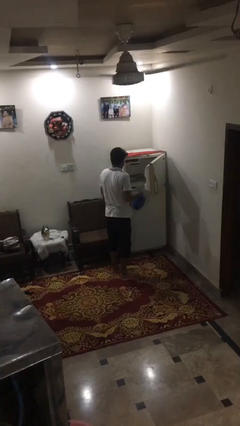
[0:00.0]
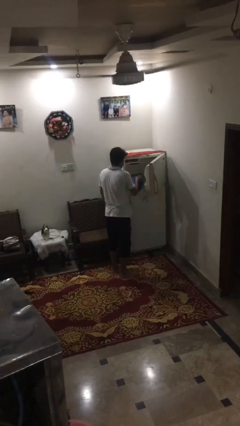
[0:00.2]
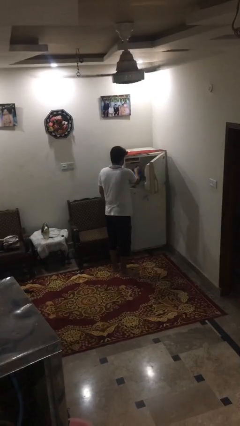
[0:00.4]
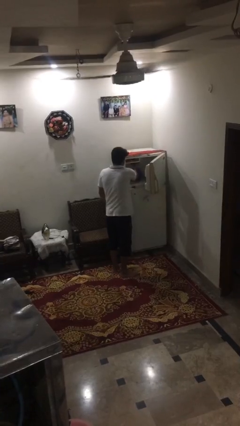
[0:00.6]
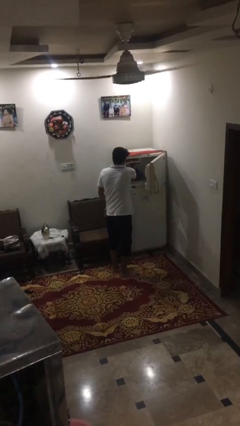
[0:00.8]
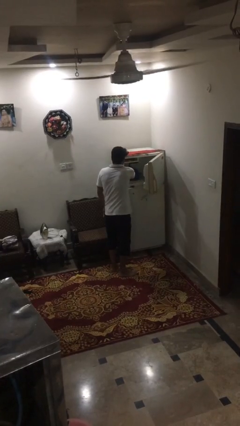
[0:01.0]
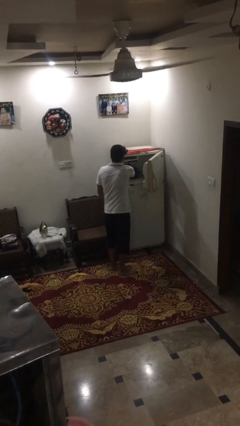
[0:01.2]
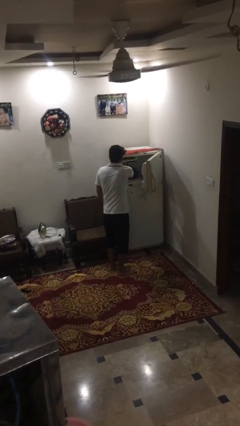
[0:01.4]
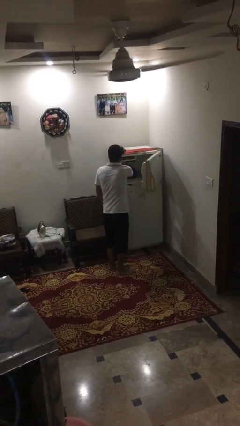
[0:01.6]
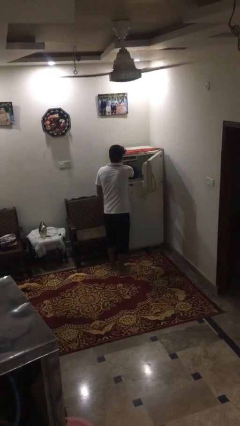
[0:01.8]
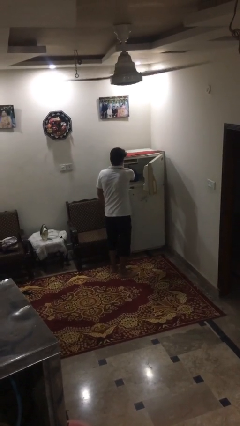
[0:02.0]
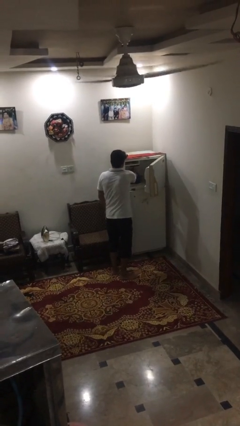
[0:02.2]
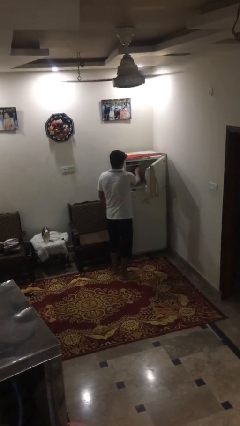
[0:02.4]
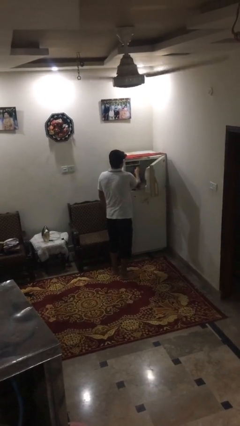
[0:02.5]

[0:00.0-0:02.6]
person loads groceries into refrigerator

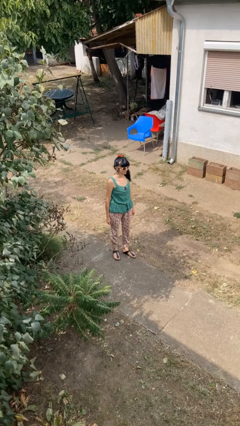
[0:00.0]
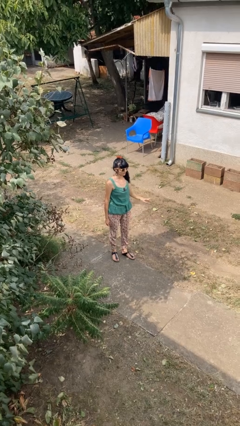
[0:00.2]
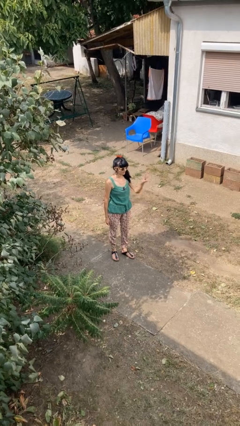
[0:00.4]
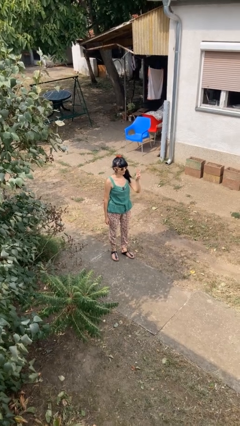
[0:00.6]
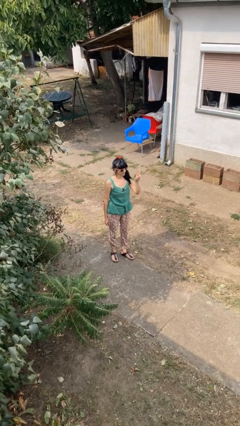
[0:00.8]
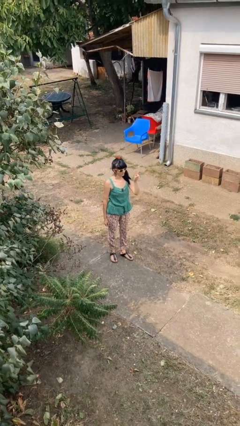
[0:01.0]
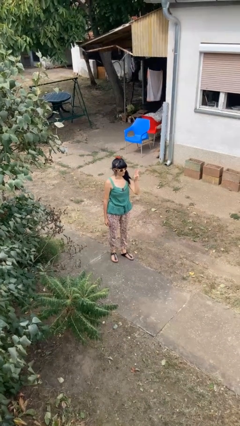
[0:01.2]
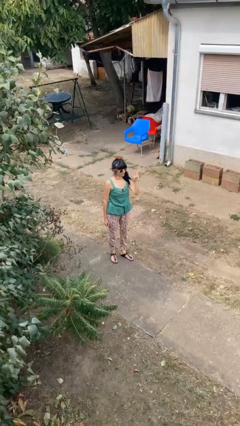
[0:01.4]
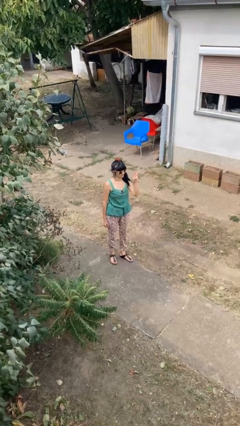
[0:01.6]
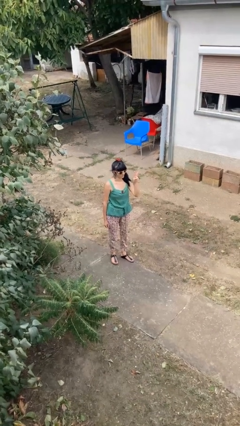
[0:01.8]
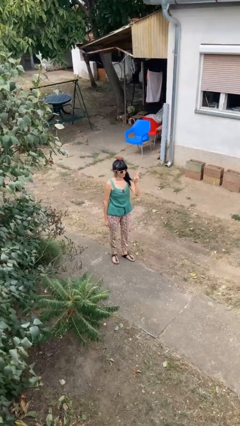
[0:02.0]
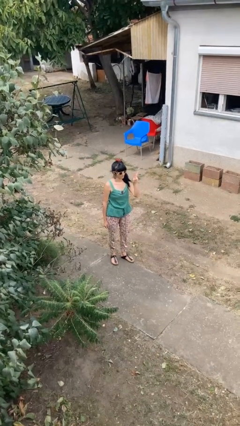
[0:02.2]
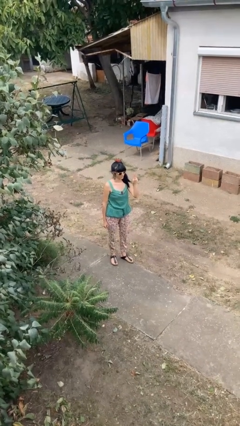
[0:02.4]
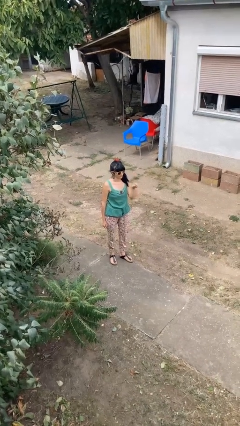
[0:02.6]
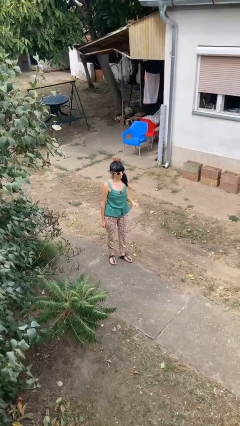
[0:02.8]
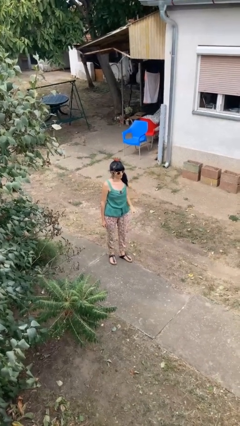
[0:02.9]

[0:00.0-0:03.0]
person gestures peace

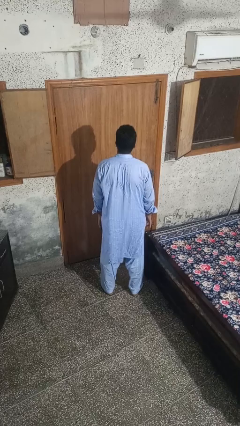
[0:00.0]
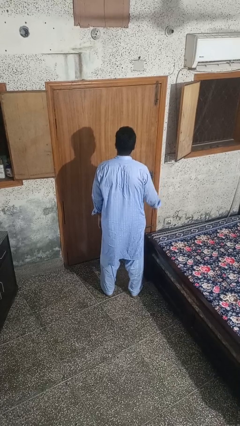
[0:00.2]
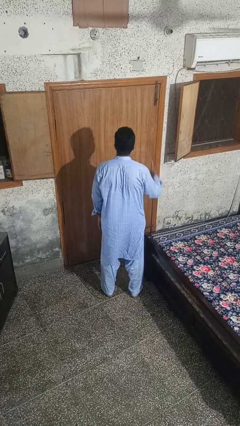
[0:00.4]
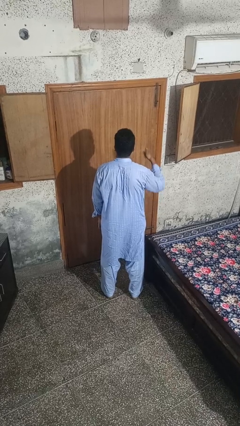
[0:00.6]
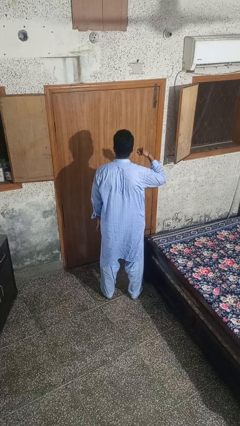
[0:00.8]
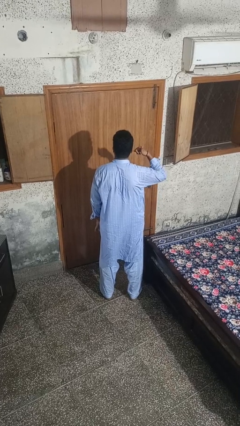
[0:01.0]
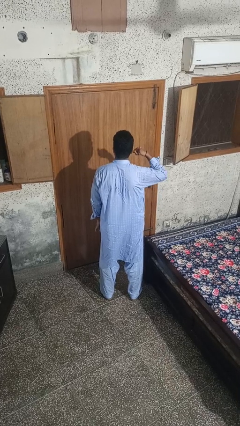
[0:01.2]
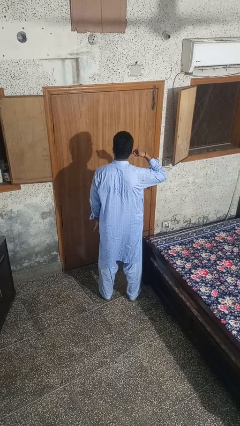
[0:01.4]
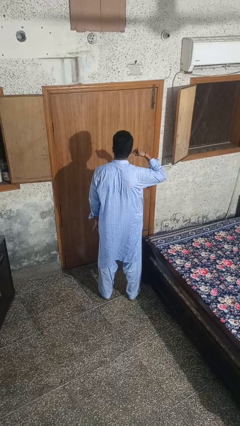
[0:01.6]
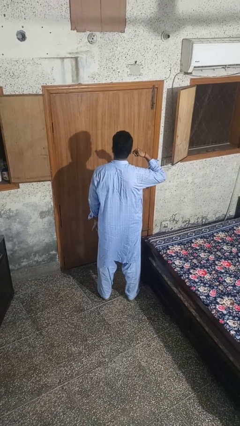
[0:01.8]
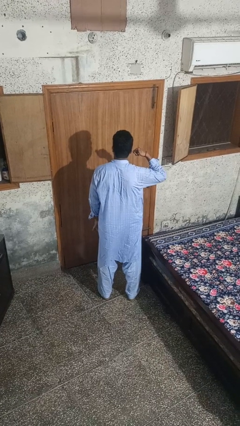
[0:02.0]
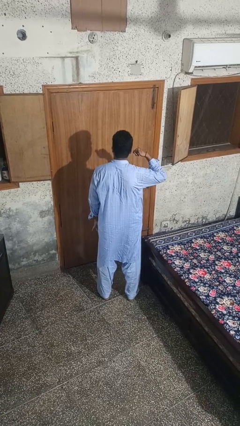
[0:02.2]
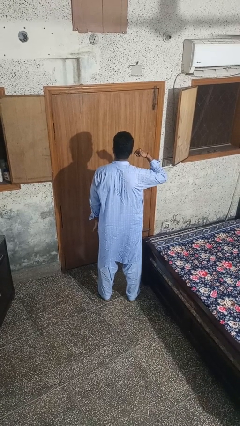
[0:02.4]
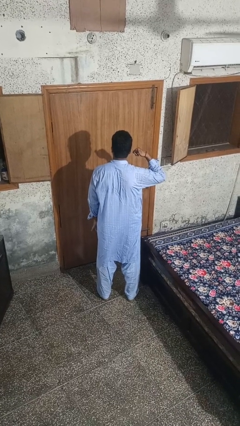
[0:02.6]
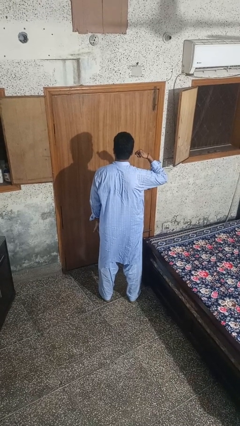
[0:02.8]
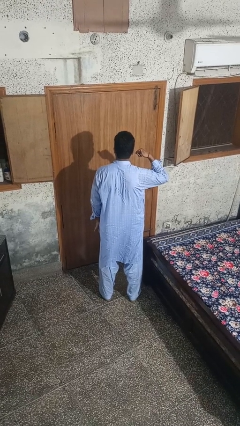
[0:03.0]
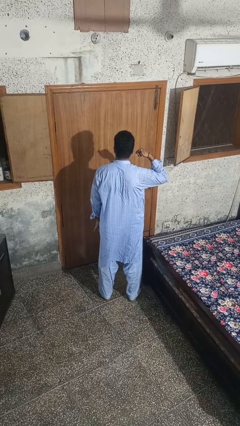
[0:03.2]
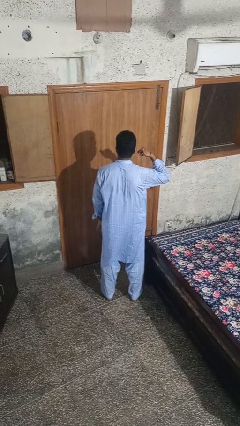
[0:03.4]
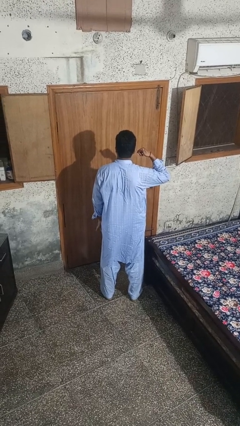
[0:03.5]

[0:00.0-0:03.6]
person gestures call me

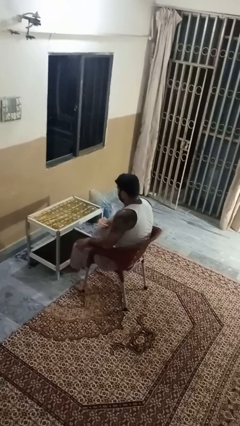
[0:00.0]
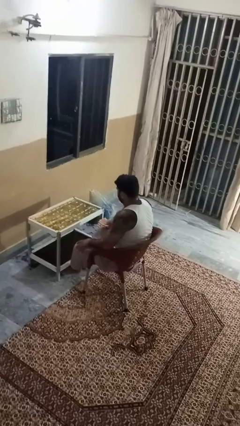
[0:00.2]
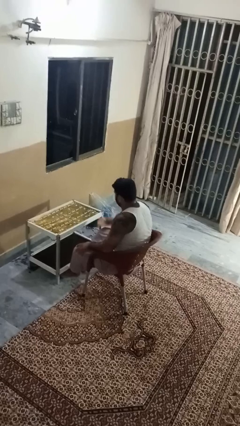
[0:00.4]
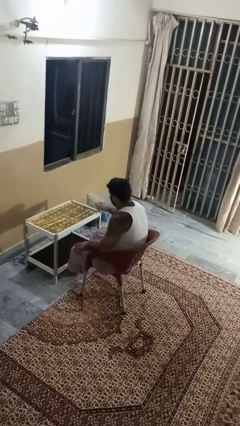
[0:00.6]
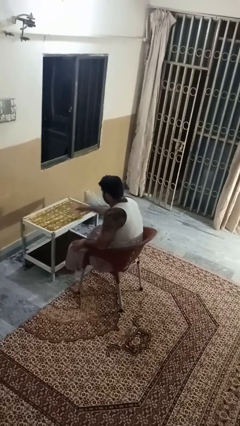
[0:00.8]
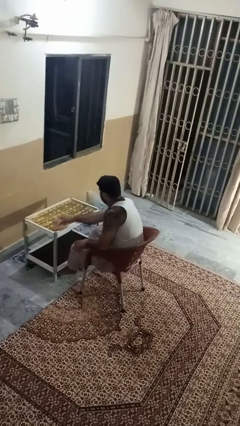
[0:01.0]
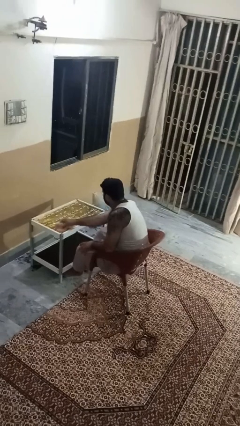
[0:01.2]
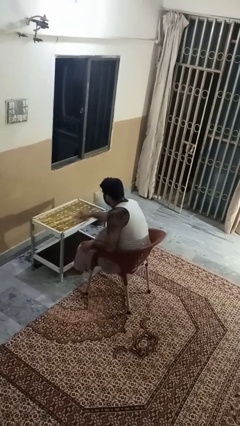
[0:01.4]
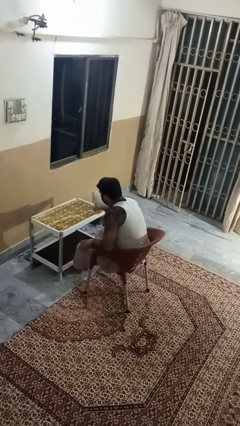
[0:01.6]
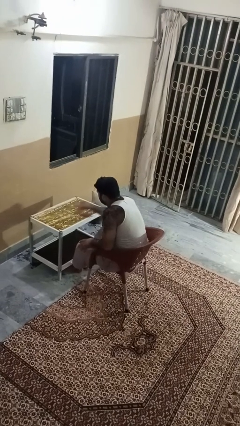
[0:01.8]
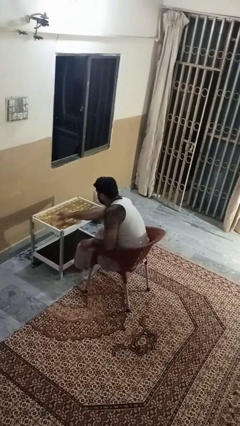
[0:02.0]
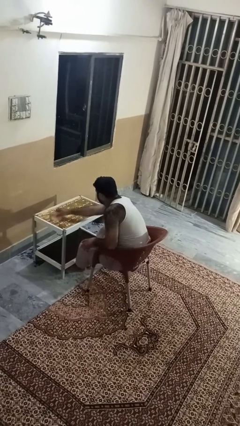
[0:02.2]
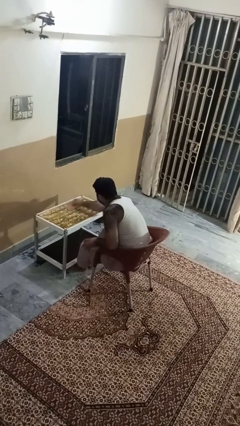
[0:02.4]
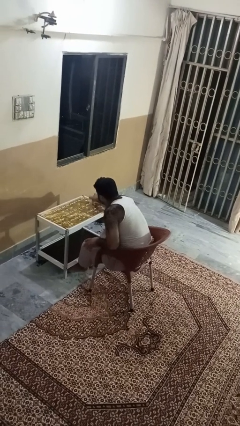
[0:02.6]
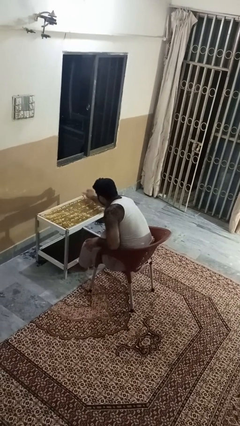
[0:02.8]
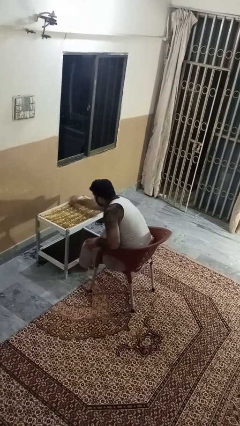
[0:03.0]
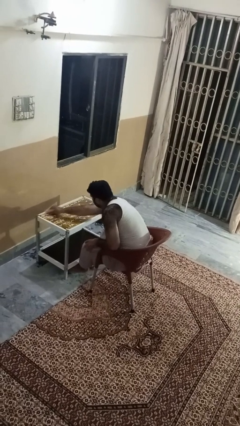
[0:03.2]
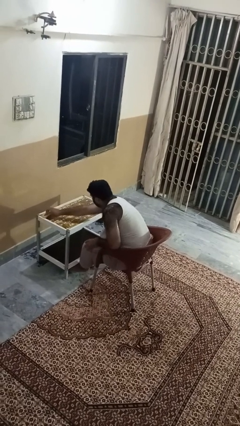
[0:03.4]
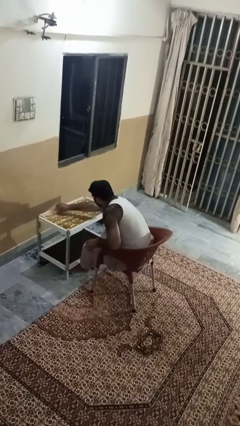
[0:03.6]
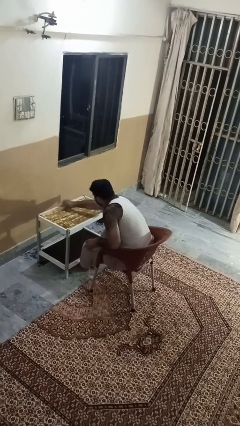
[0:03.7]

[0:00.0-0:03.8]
person cleans table with rag

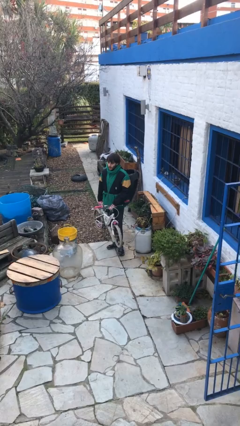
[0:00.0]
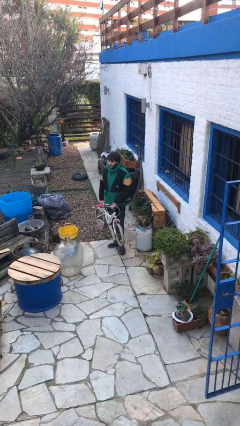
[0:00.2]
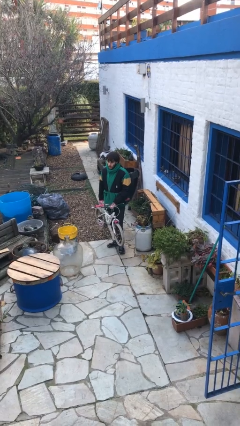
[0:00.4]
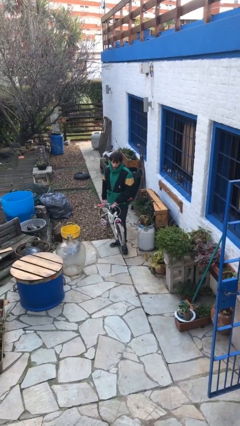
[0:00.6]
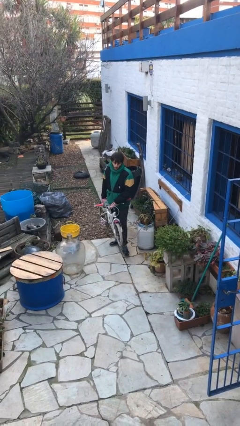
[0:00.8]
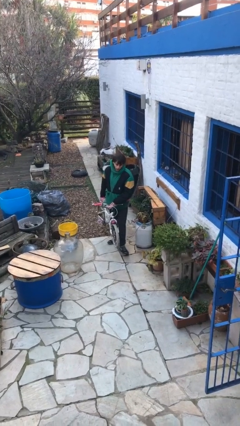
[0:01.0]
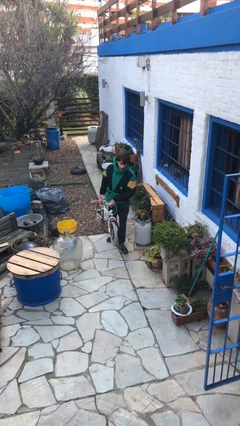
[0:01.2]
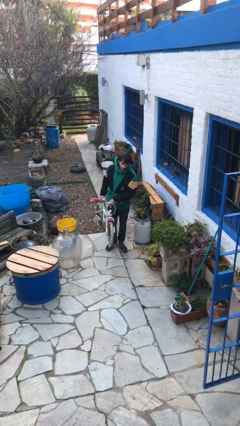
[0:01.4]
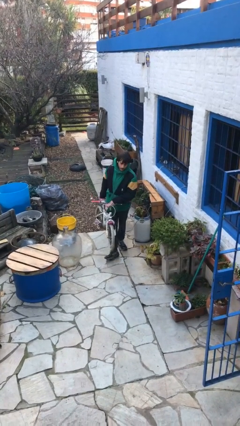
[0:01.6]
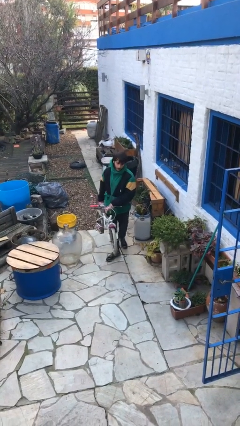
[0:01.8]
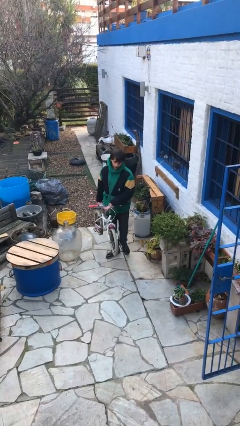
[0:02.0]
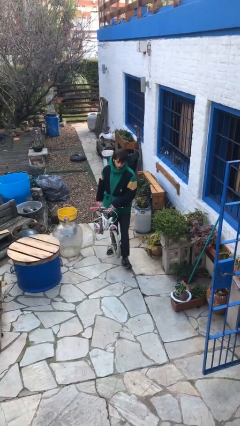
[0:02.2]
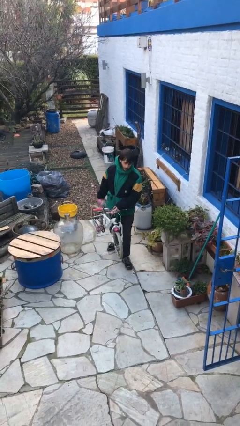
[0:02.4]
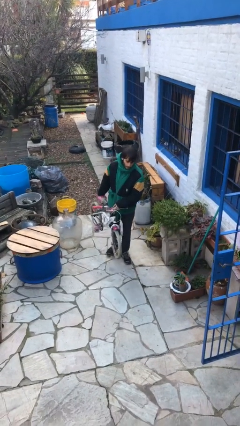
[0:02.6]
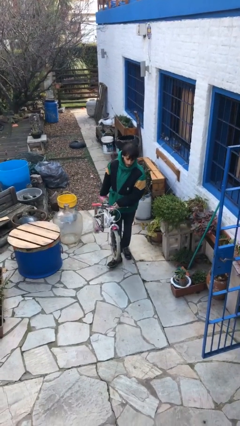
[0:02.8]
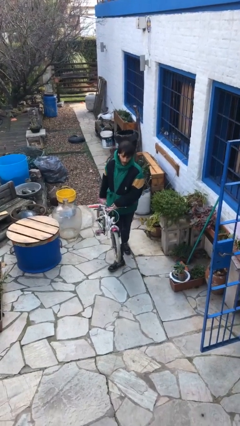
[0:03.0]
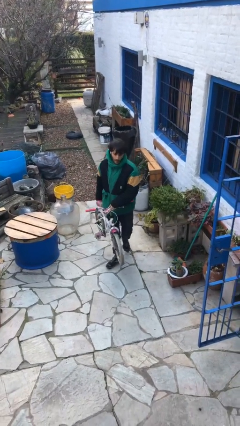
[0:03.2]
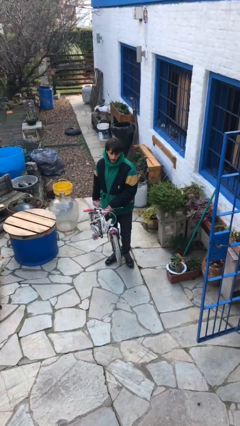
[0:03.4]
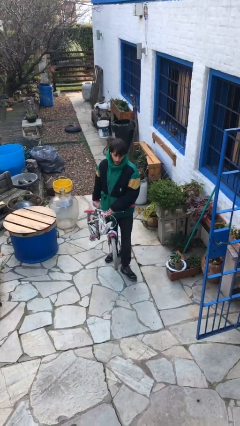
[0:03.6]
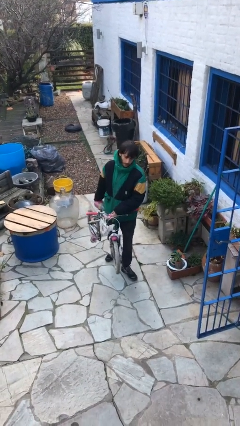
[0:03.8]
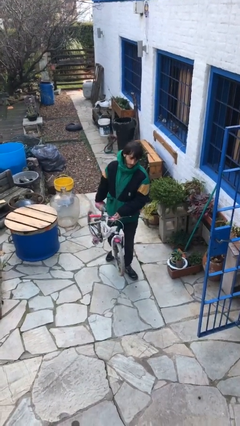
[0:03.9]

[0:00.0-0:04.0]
person carries bicycle

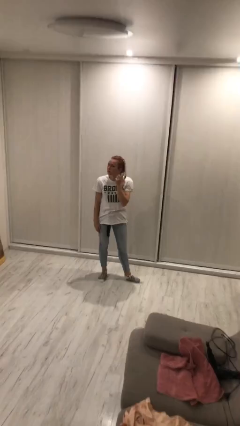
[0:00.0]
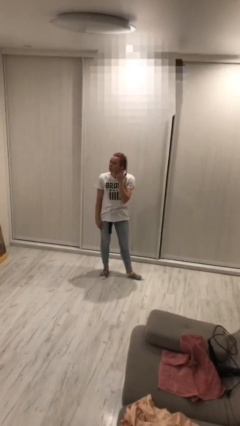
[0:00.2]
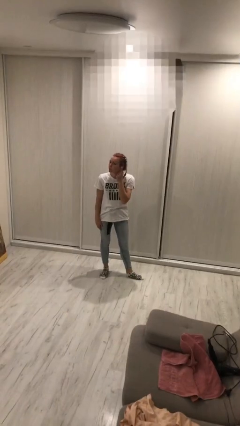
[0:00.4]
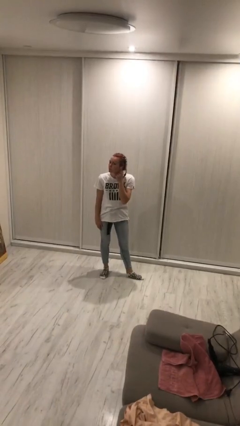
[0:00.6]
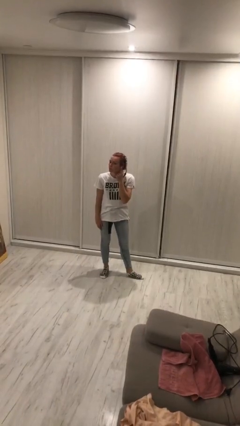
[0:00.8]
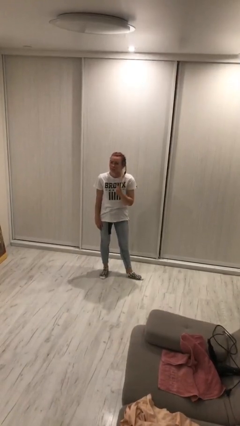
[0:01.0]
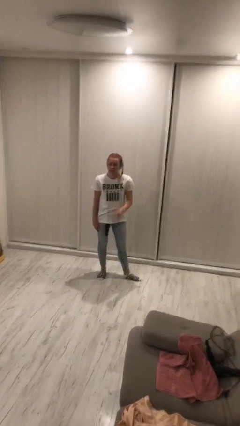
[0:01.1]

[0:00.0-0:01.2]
person gestures listen closely
